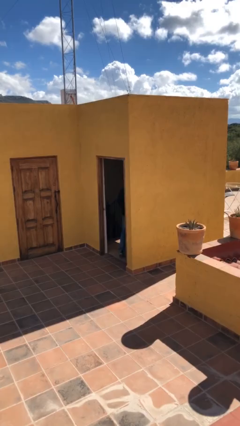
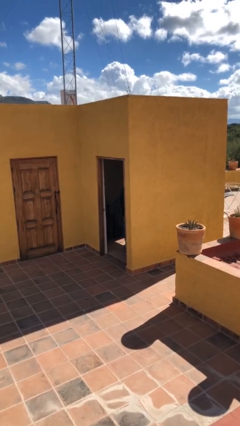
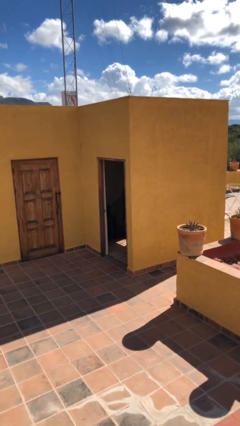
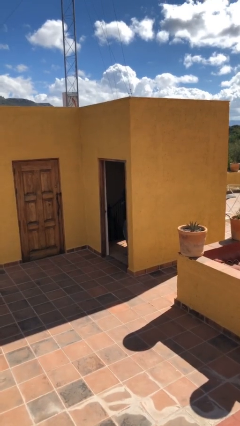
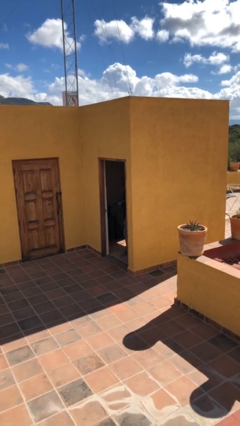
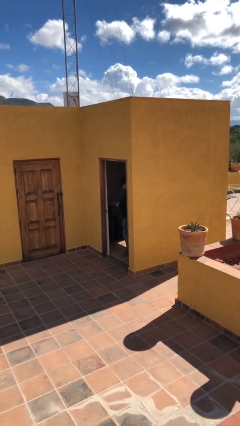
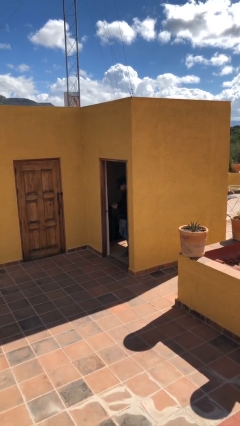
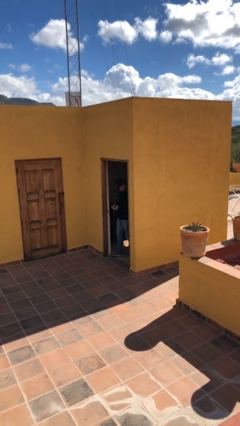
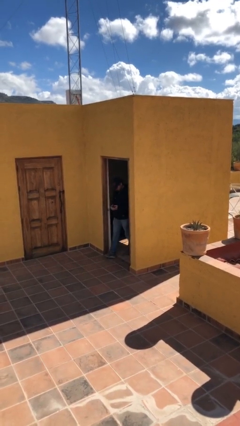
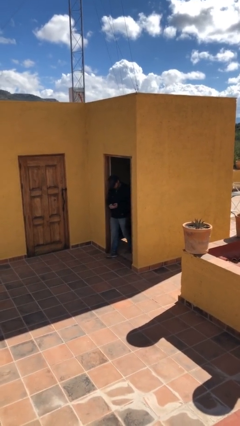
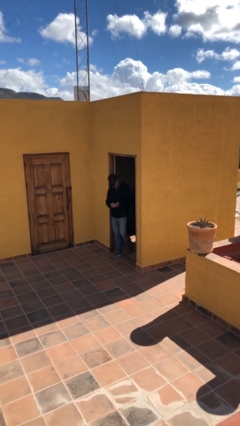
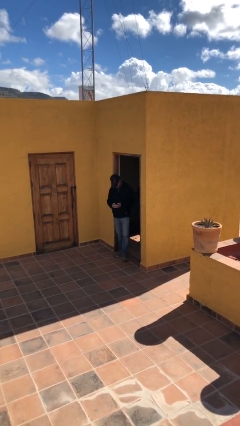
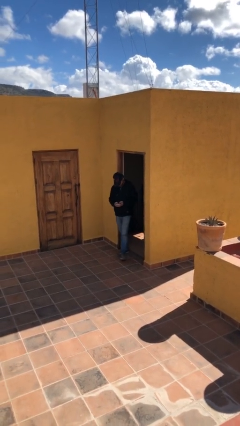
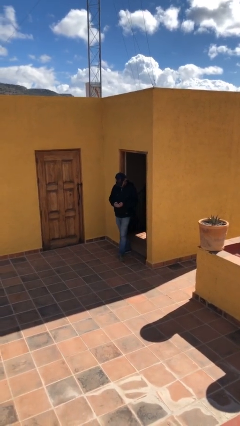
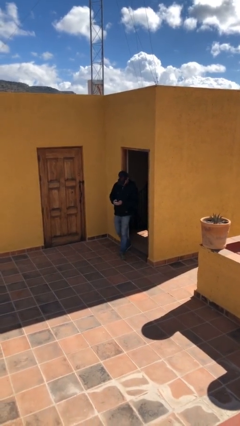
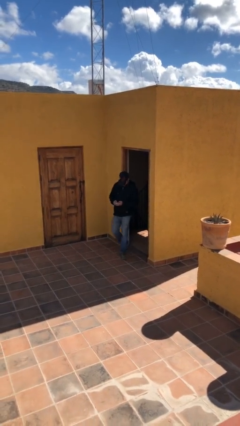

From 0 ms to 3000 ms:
person enters scene through structure

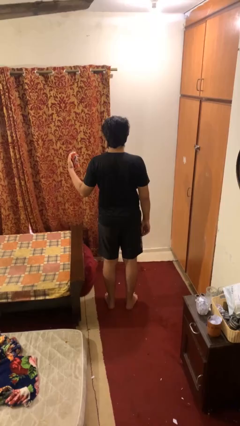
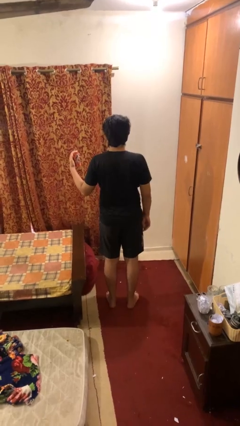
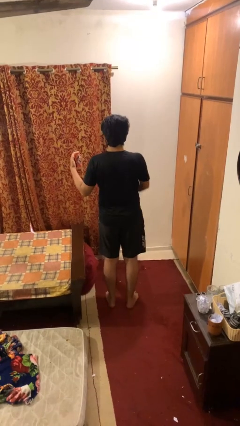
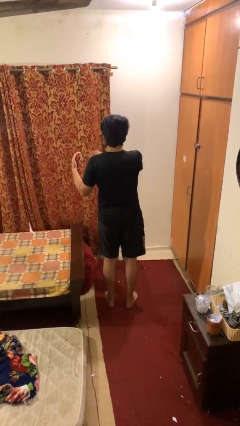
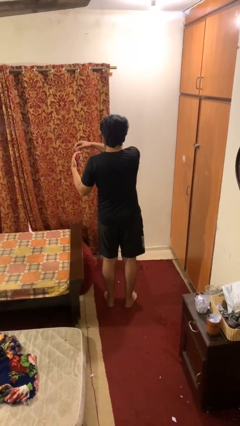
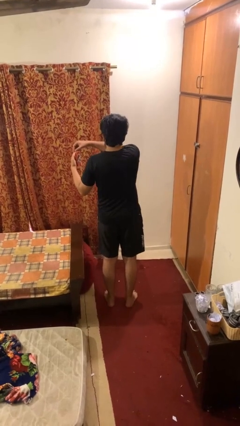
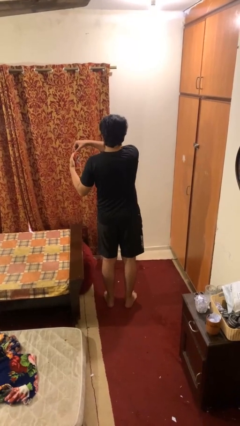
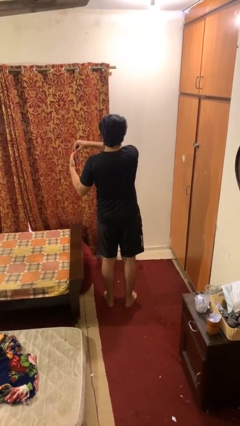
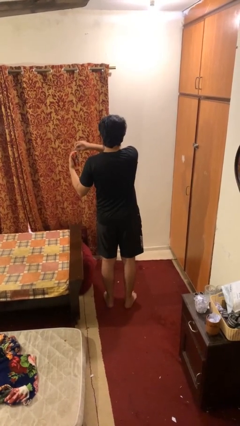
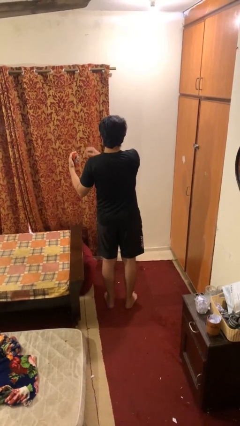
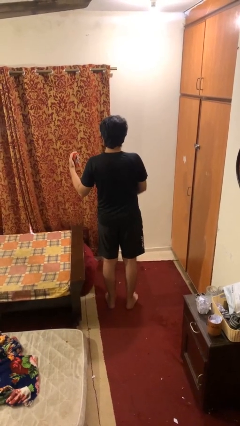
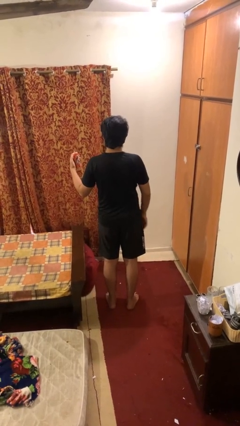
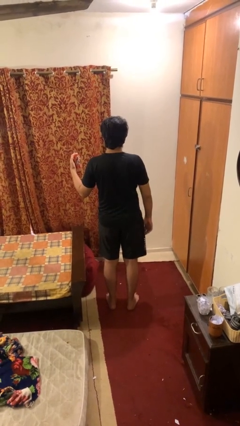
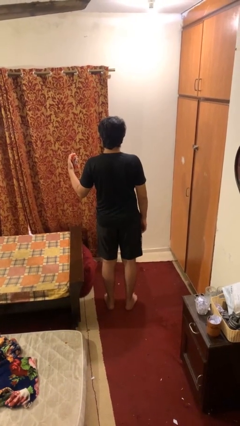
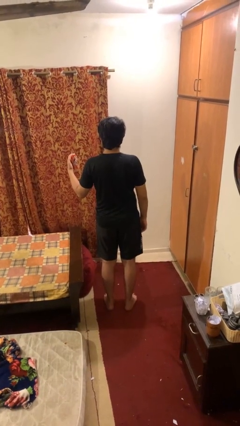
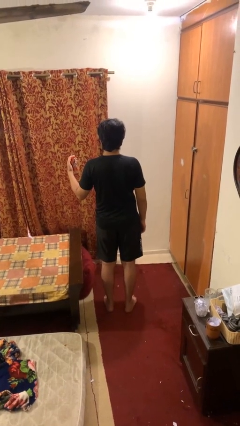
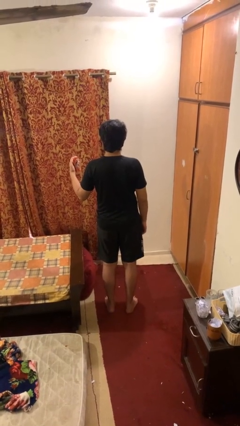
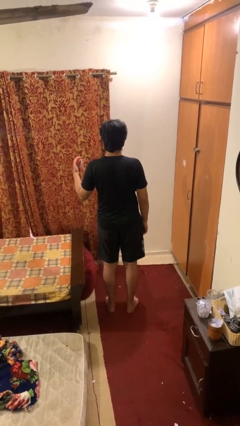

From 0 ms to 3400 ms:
person opens beverage can

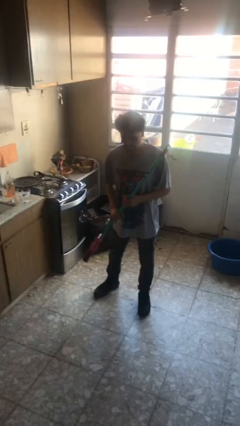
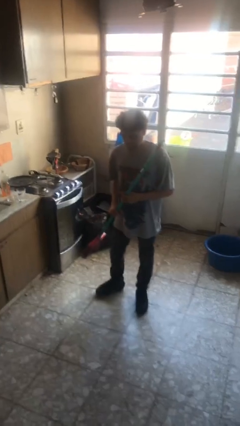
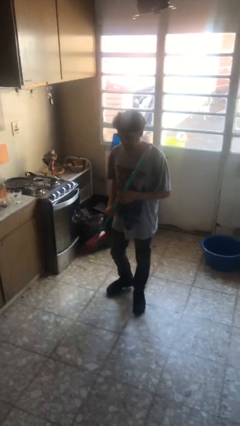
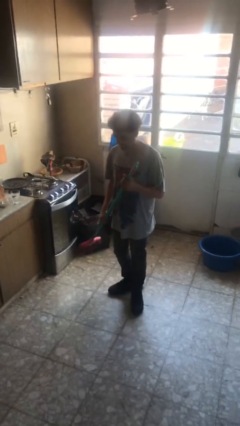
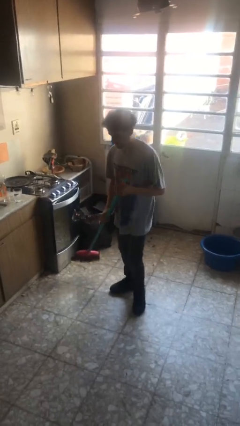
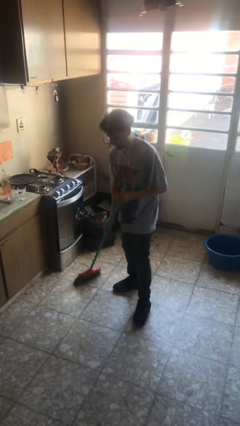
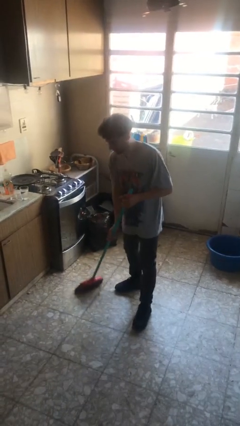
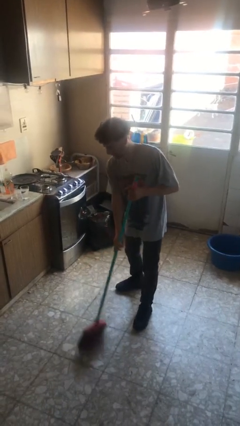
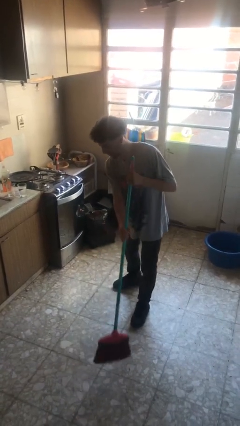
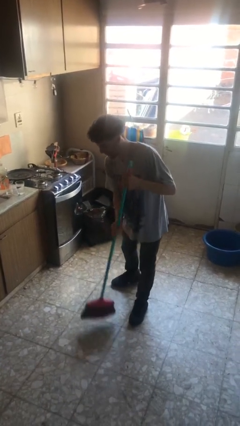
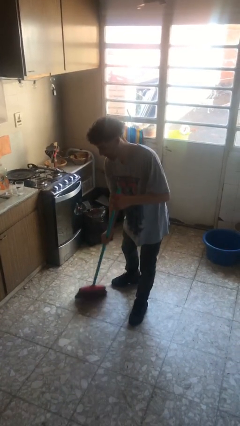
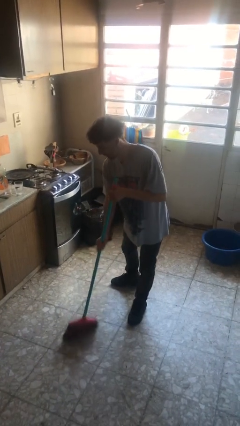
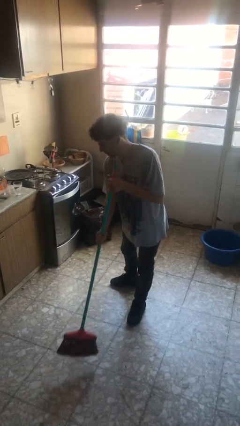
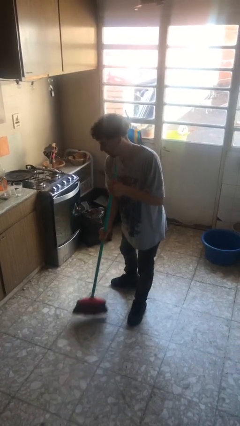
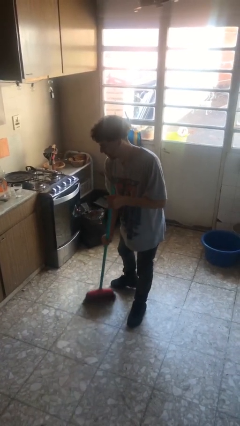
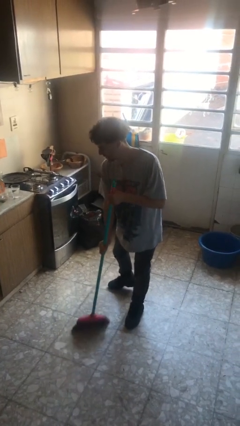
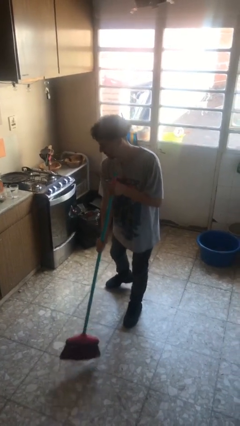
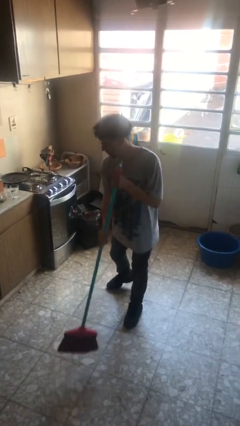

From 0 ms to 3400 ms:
person sweeps floor

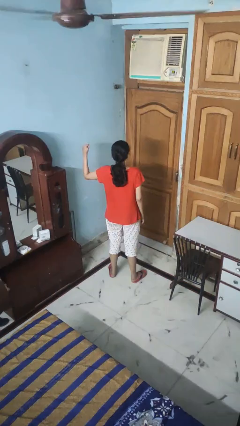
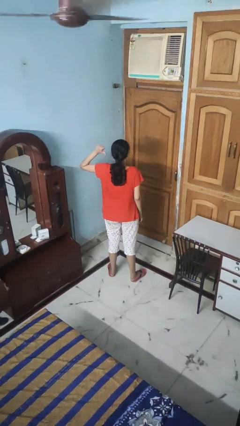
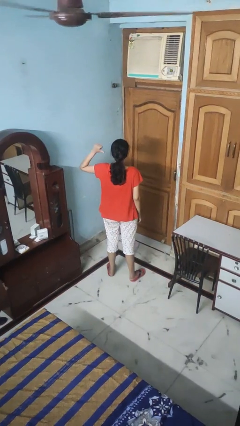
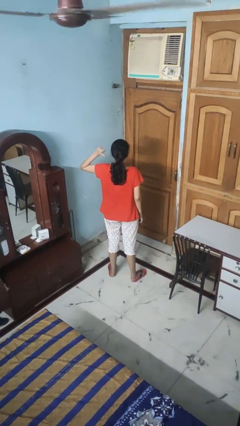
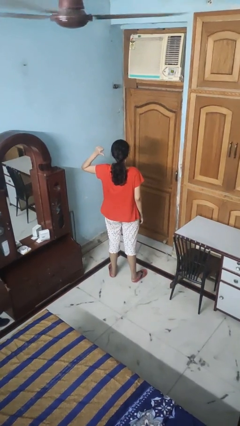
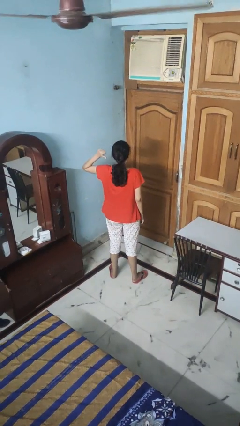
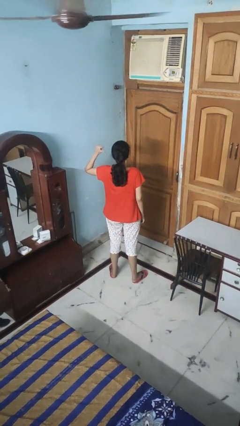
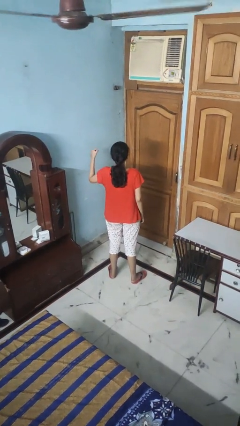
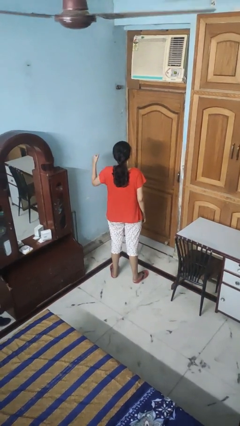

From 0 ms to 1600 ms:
person gestures behind me

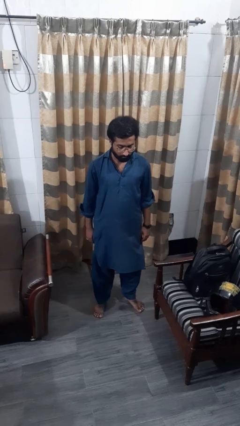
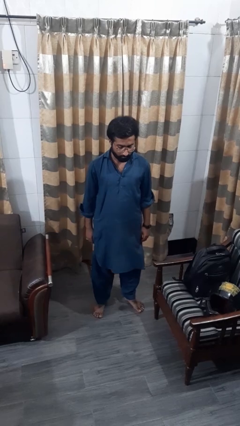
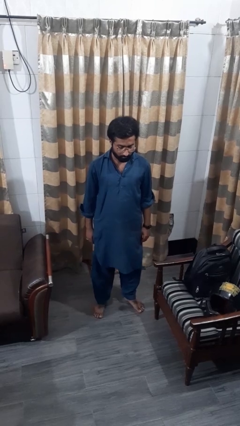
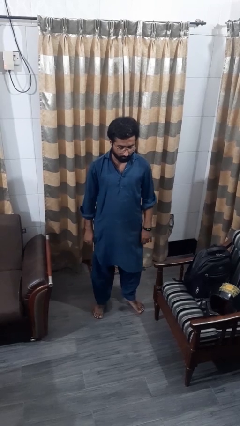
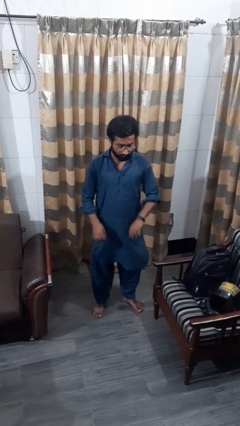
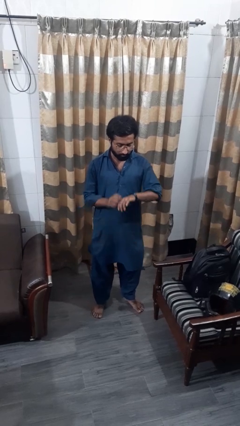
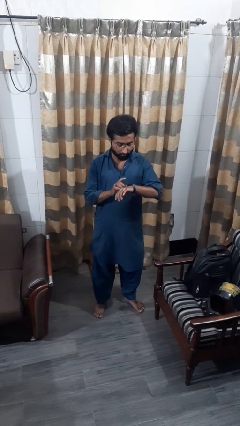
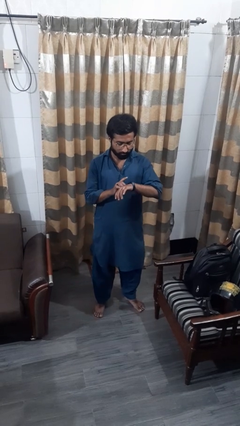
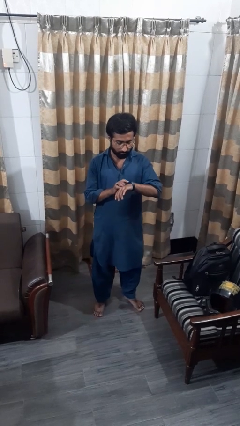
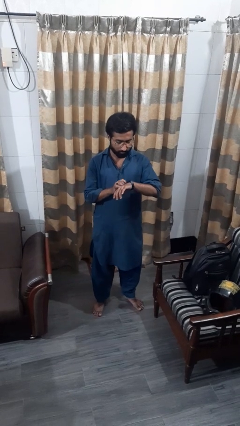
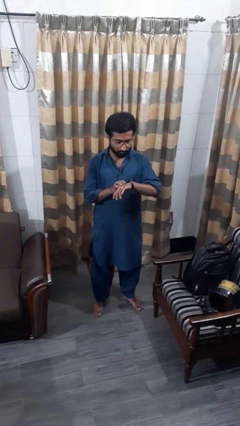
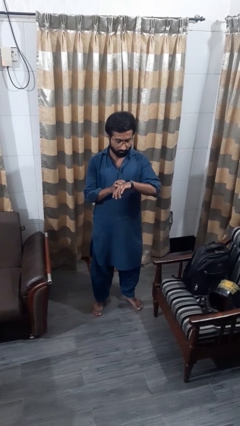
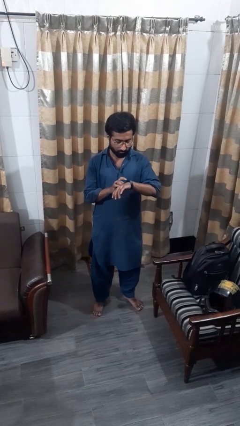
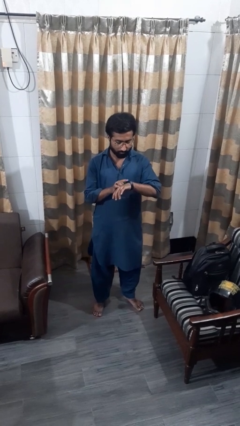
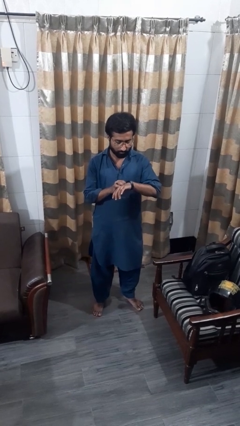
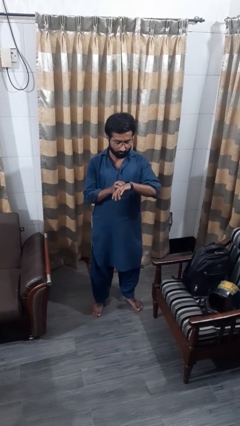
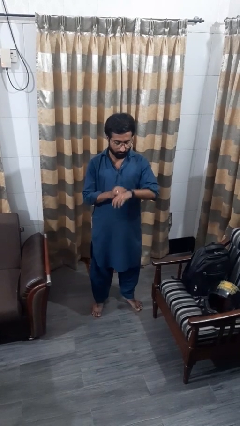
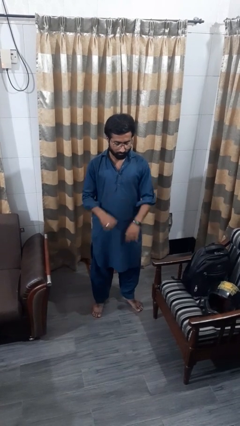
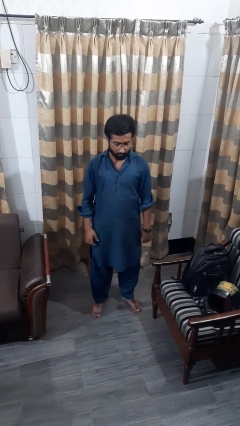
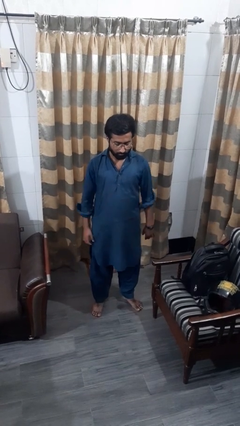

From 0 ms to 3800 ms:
person looks at wristwatch

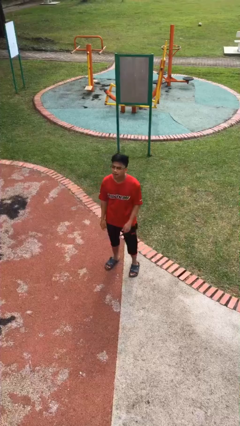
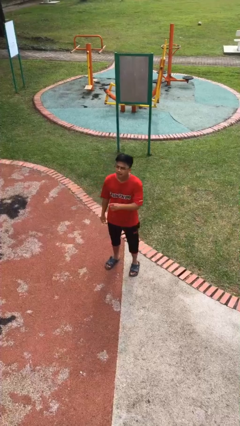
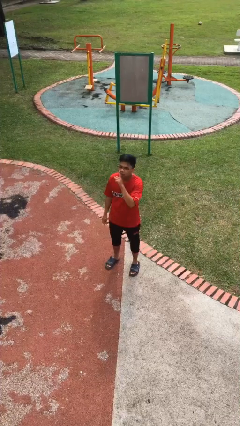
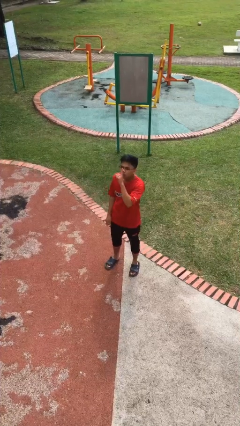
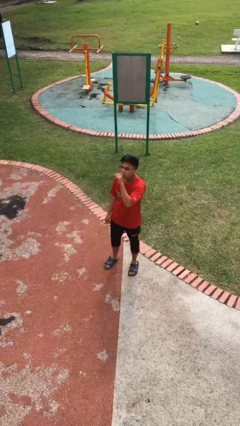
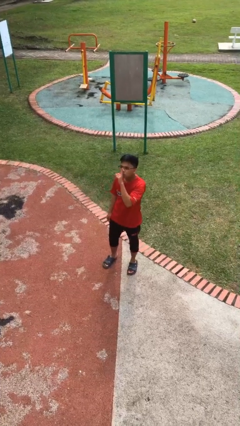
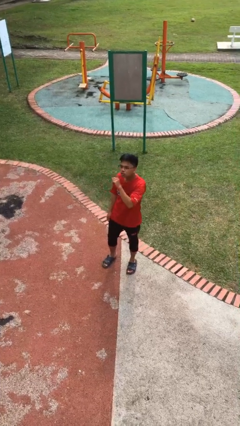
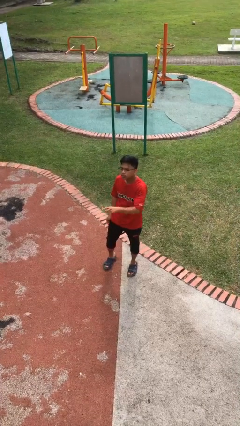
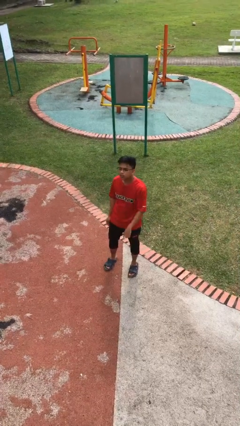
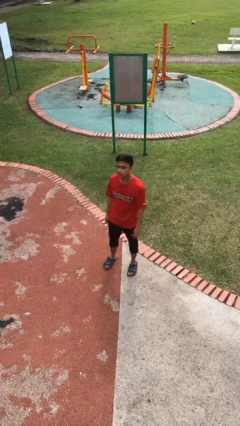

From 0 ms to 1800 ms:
person gestures be quiet

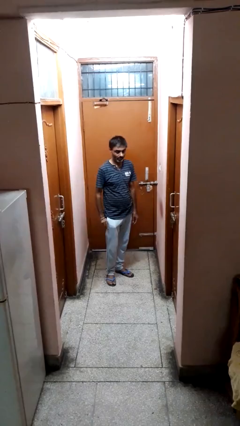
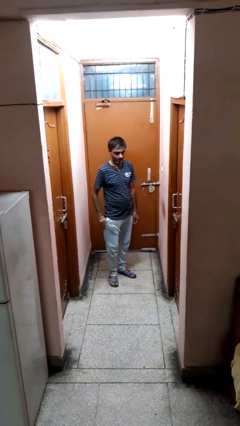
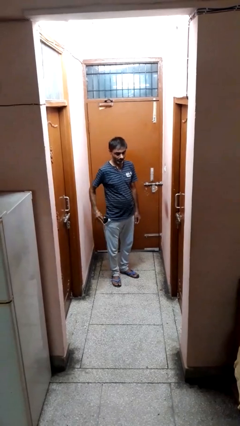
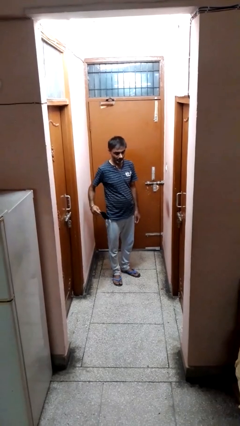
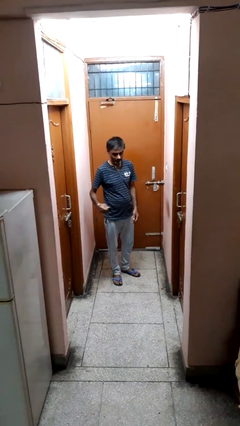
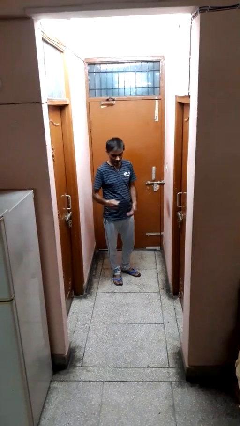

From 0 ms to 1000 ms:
person takes phone from pocket
